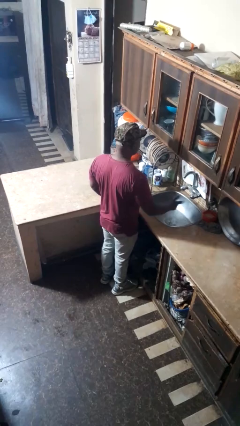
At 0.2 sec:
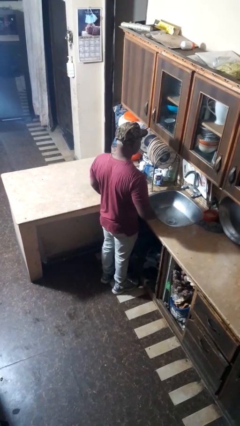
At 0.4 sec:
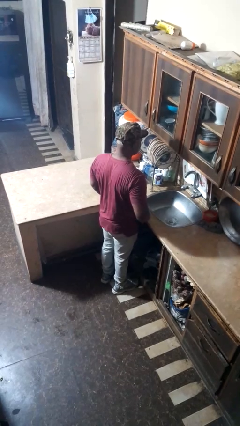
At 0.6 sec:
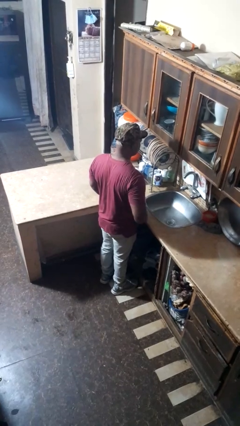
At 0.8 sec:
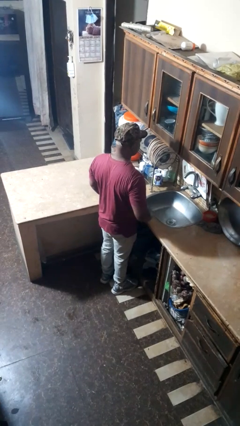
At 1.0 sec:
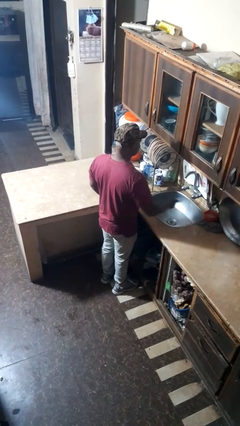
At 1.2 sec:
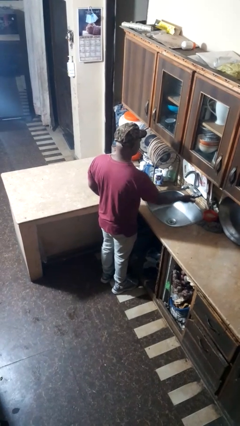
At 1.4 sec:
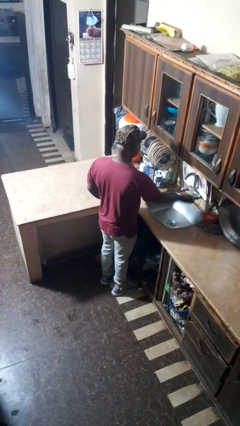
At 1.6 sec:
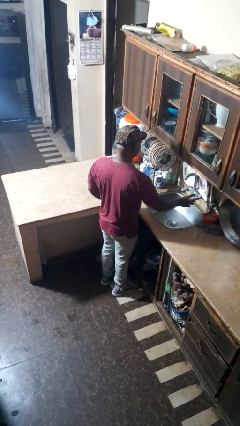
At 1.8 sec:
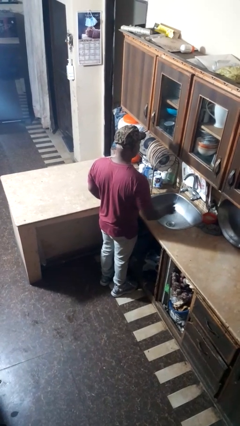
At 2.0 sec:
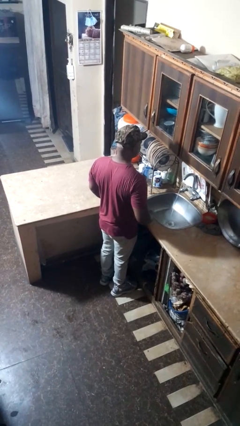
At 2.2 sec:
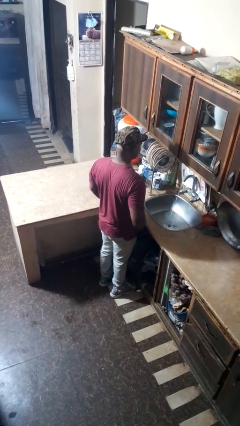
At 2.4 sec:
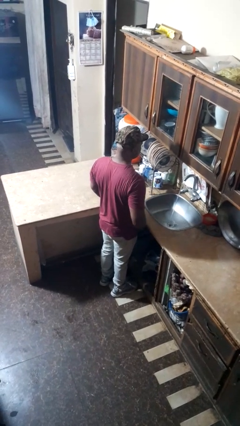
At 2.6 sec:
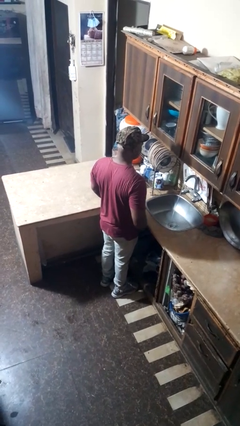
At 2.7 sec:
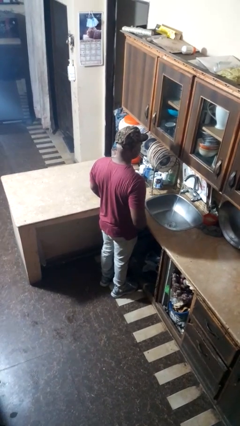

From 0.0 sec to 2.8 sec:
person turns on faucet

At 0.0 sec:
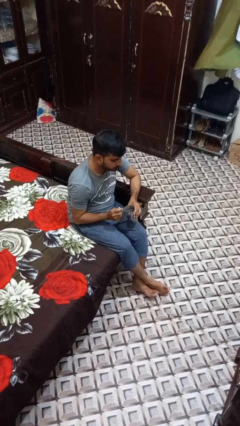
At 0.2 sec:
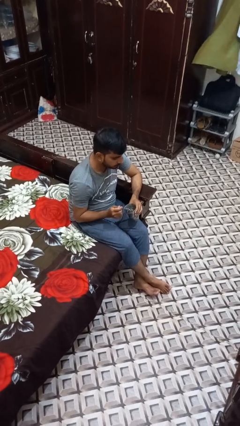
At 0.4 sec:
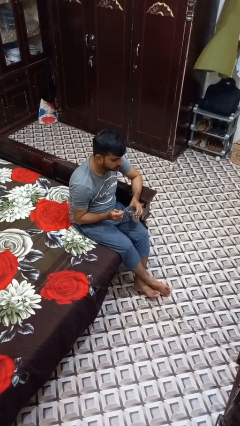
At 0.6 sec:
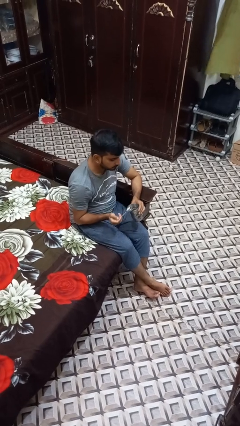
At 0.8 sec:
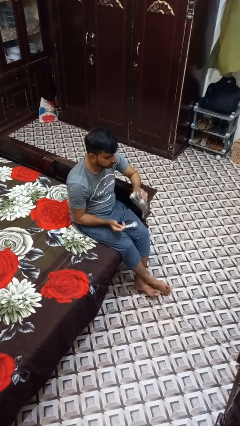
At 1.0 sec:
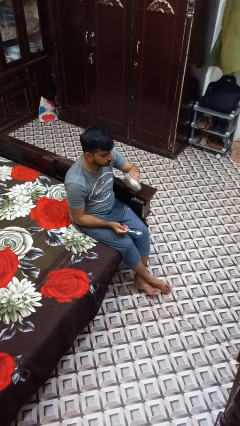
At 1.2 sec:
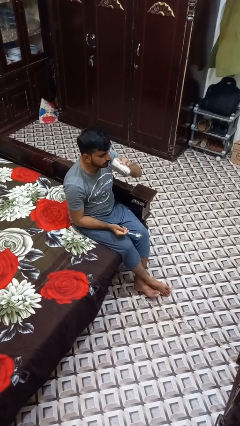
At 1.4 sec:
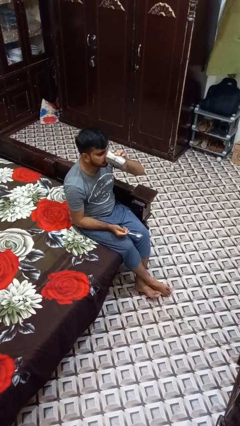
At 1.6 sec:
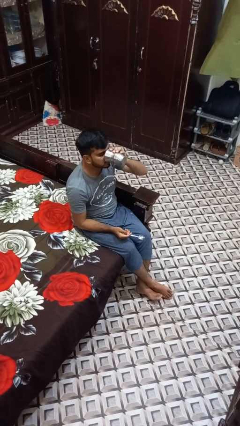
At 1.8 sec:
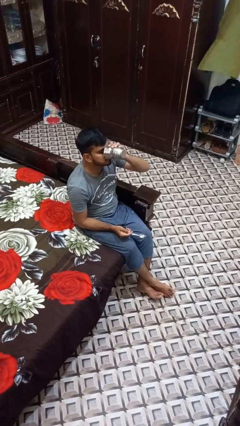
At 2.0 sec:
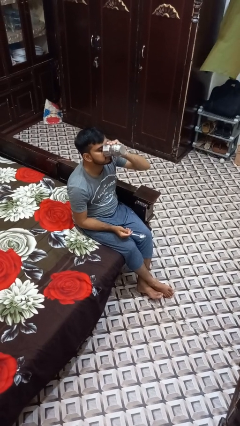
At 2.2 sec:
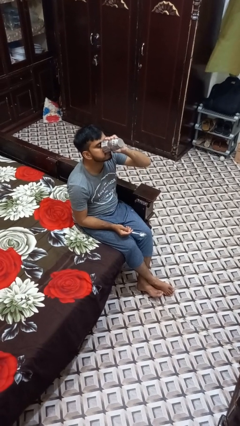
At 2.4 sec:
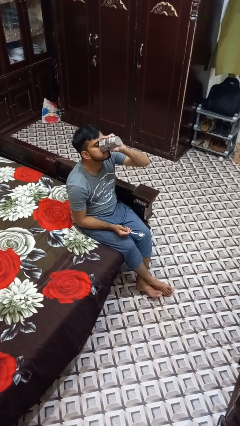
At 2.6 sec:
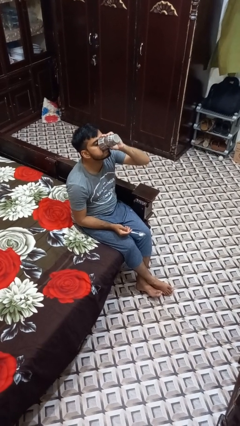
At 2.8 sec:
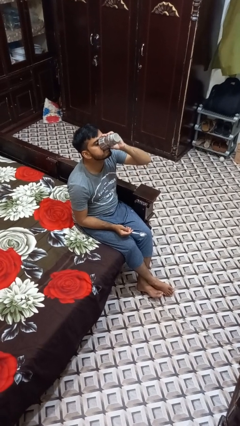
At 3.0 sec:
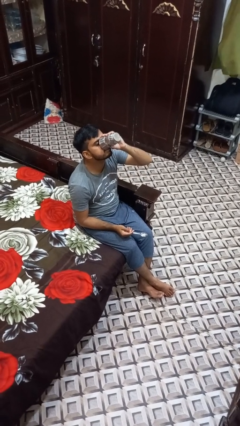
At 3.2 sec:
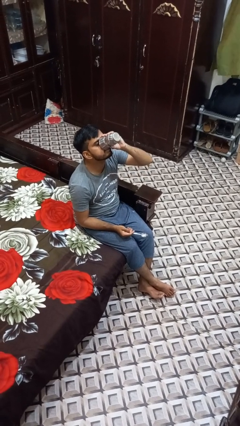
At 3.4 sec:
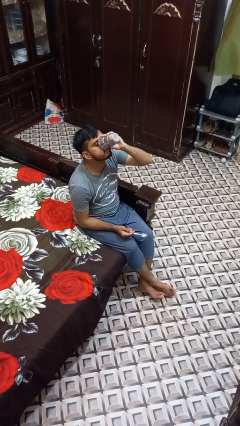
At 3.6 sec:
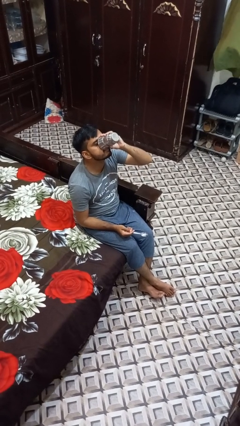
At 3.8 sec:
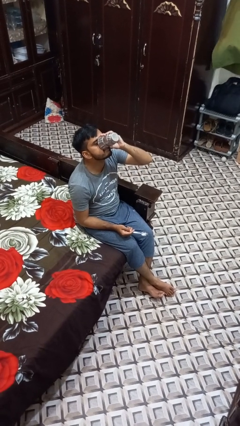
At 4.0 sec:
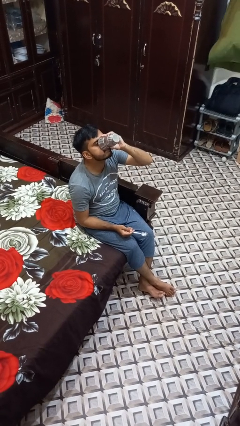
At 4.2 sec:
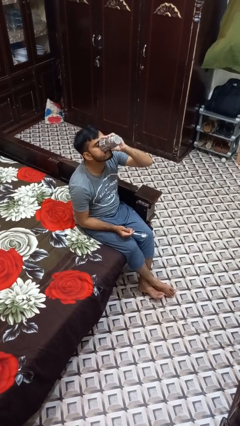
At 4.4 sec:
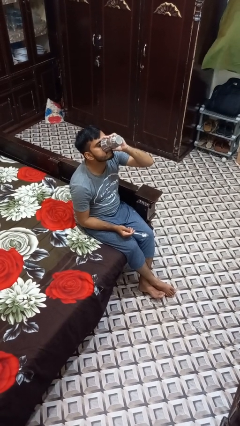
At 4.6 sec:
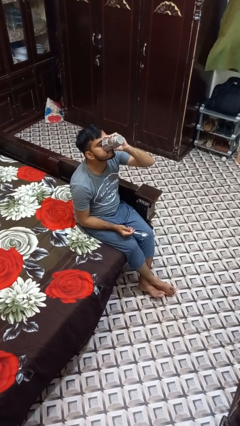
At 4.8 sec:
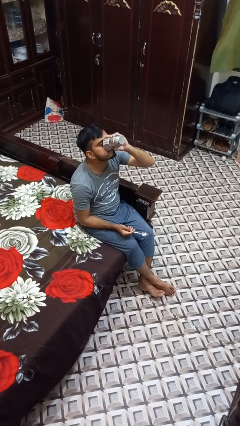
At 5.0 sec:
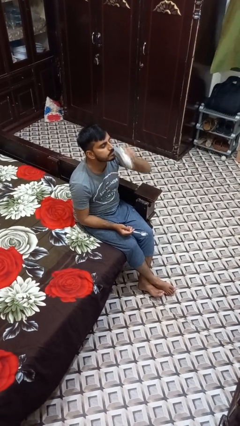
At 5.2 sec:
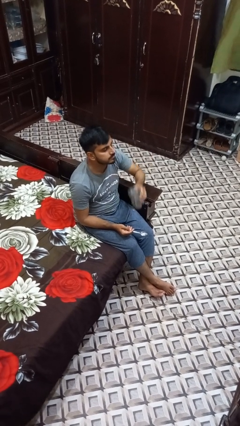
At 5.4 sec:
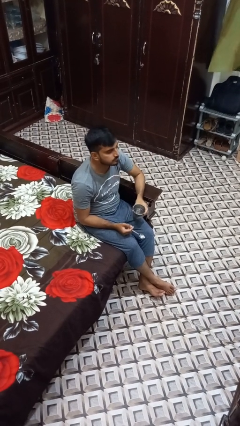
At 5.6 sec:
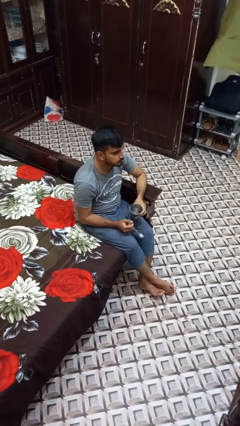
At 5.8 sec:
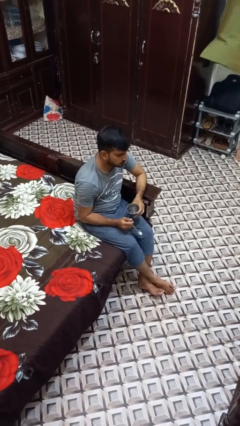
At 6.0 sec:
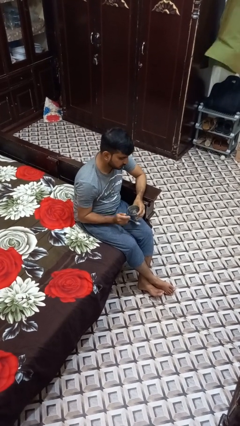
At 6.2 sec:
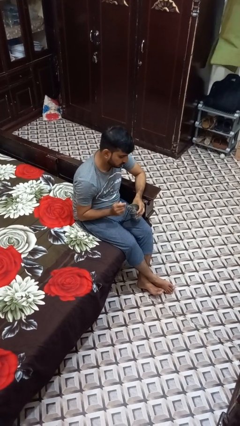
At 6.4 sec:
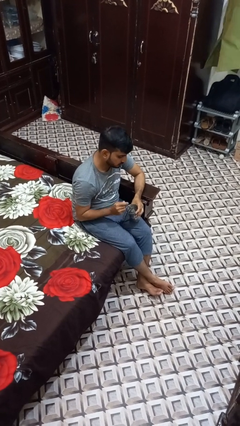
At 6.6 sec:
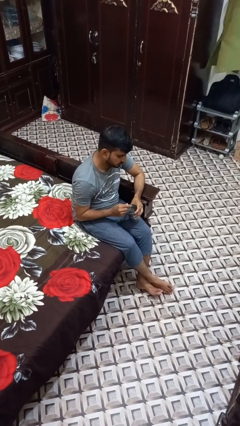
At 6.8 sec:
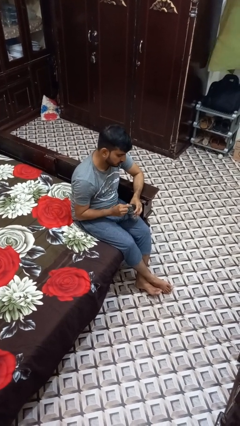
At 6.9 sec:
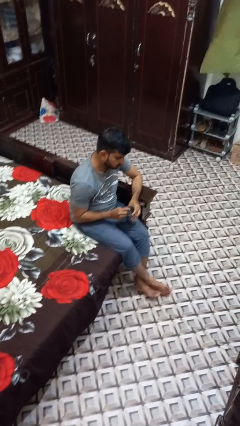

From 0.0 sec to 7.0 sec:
person drinks from mug

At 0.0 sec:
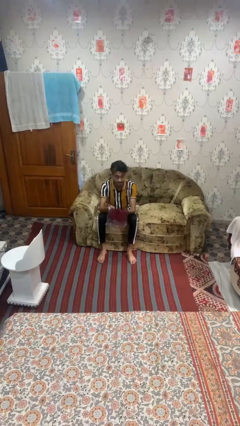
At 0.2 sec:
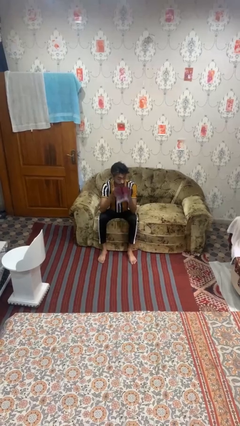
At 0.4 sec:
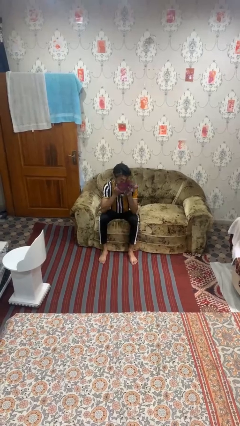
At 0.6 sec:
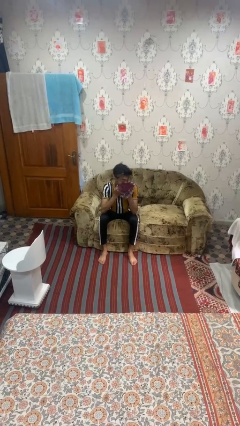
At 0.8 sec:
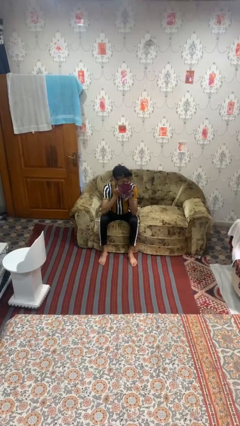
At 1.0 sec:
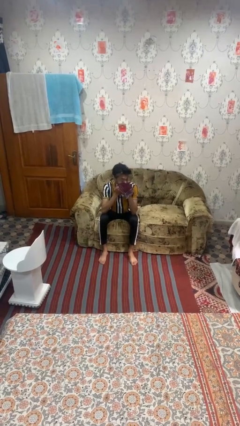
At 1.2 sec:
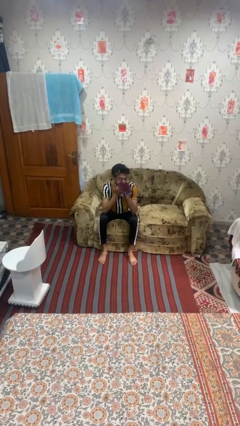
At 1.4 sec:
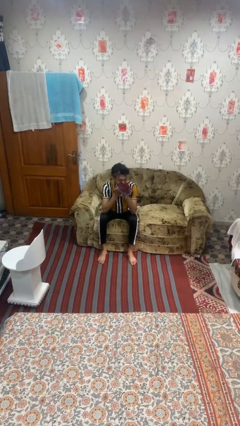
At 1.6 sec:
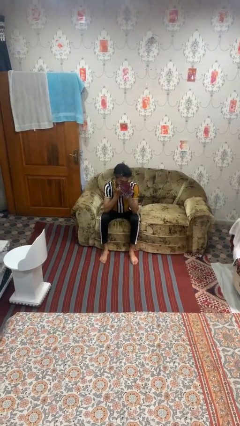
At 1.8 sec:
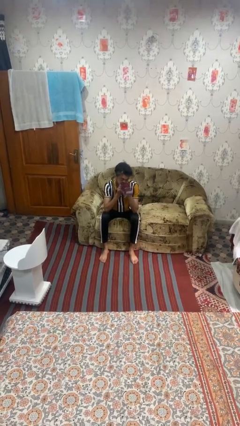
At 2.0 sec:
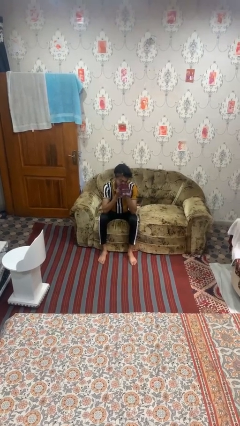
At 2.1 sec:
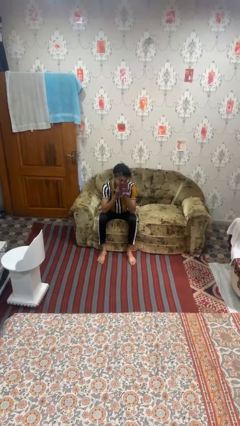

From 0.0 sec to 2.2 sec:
person blows nose

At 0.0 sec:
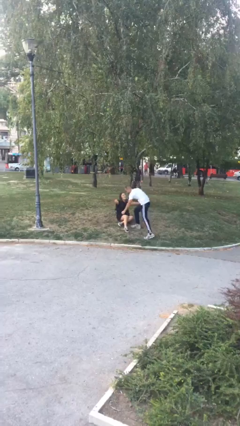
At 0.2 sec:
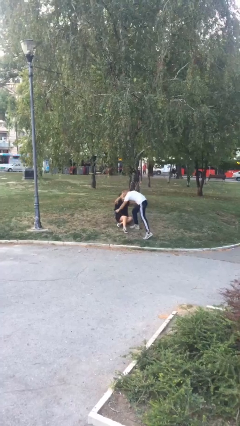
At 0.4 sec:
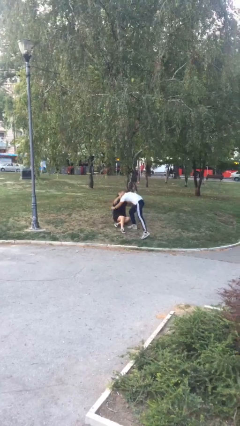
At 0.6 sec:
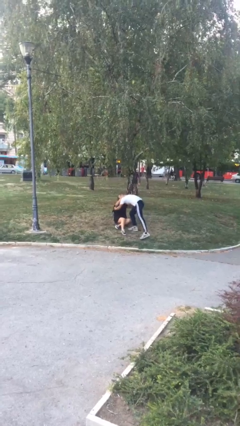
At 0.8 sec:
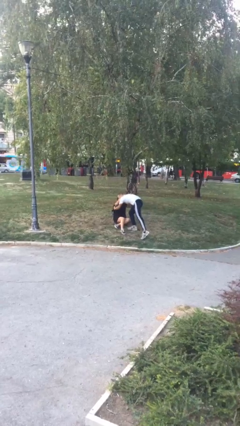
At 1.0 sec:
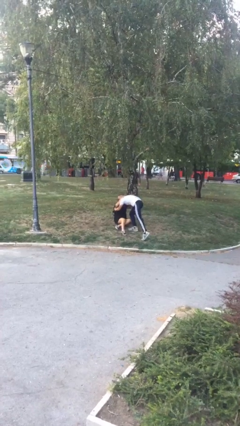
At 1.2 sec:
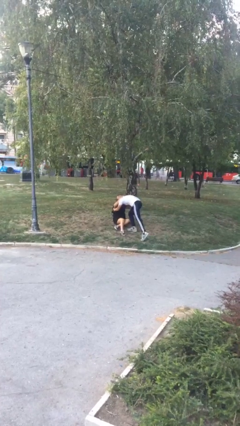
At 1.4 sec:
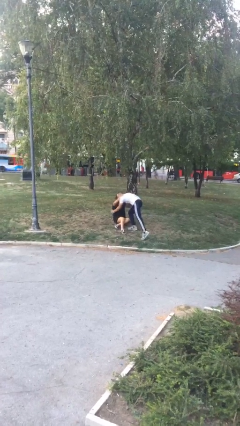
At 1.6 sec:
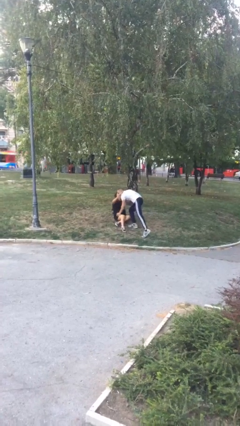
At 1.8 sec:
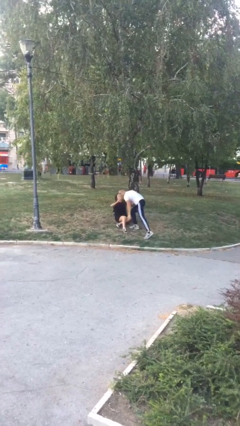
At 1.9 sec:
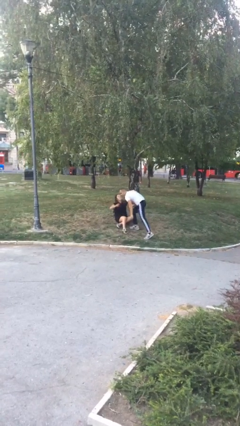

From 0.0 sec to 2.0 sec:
person embraces person

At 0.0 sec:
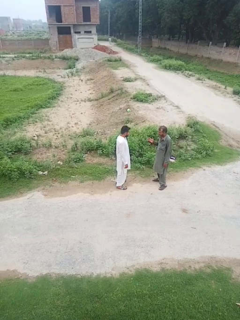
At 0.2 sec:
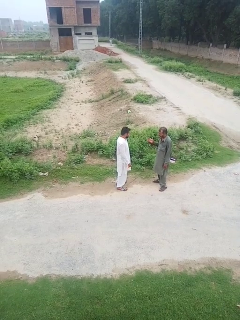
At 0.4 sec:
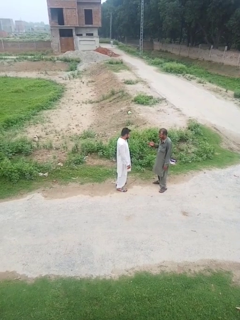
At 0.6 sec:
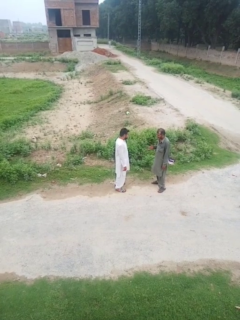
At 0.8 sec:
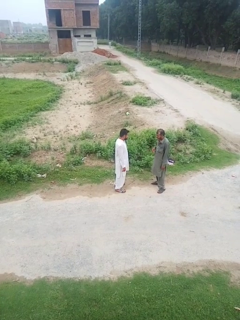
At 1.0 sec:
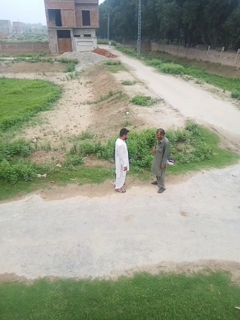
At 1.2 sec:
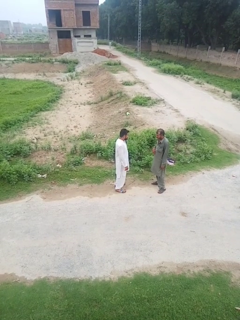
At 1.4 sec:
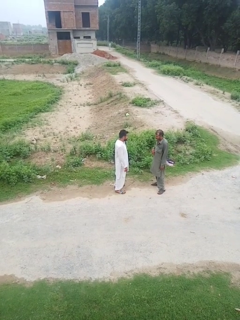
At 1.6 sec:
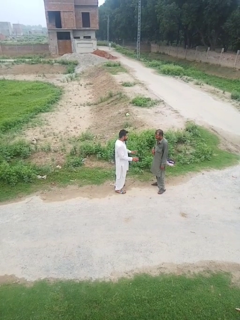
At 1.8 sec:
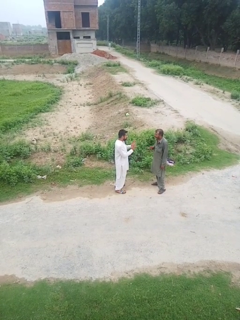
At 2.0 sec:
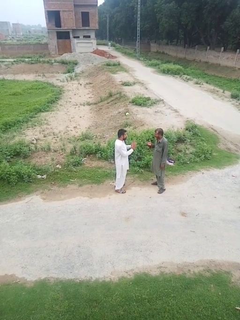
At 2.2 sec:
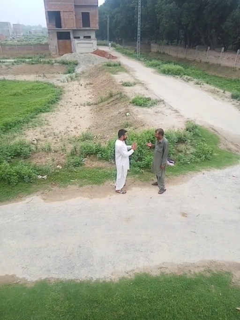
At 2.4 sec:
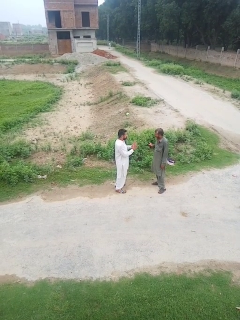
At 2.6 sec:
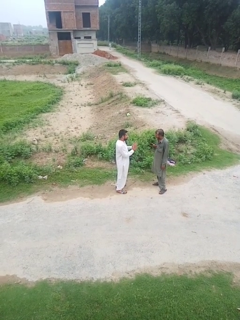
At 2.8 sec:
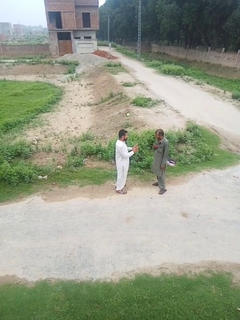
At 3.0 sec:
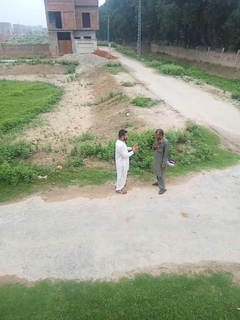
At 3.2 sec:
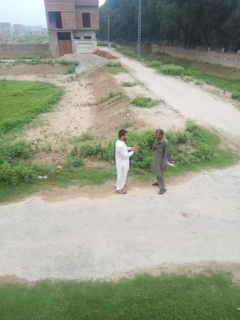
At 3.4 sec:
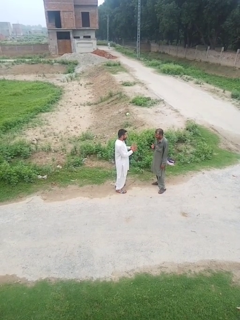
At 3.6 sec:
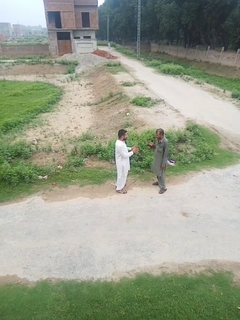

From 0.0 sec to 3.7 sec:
person talks to person

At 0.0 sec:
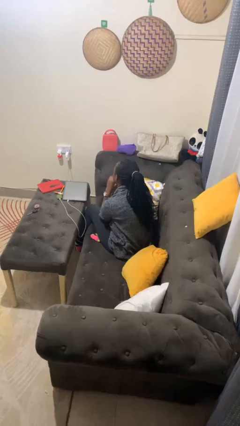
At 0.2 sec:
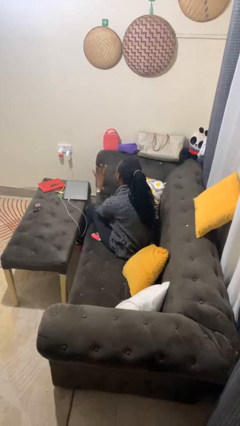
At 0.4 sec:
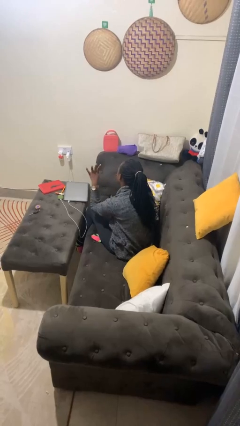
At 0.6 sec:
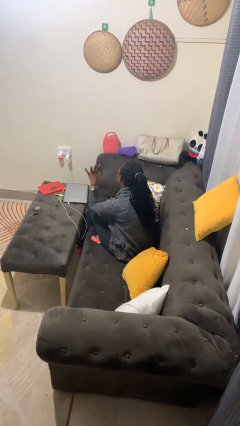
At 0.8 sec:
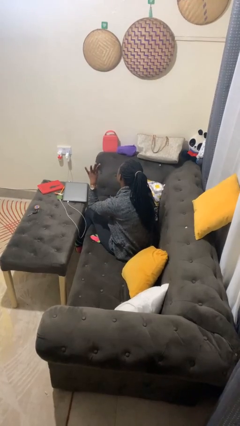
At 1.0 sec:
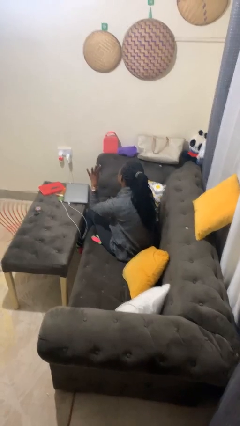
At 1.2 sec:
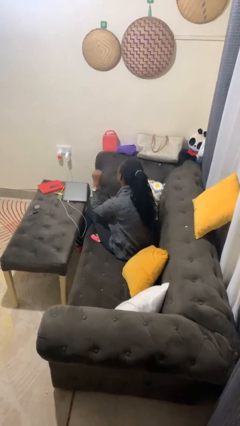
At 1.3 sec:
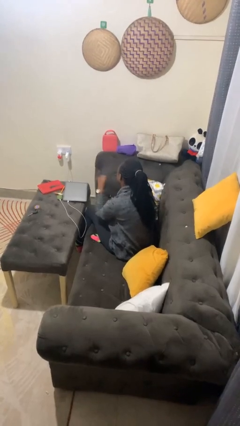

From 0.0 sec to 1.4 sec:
person gestures number four
